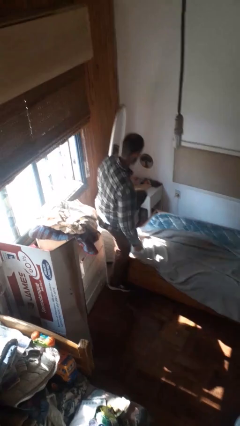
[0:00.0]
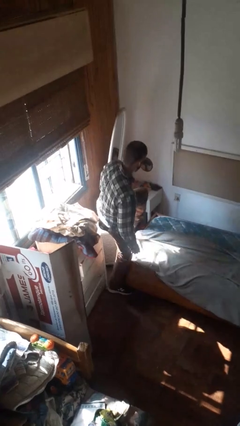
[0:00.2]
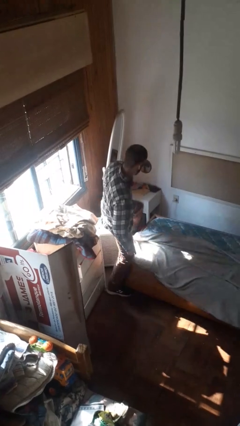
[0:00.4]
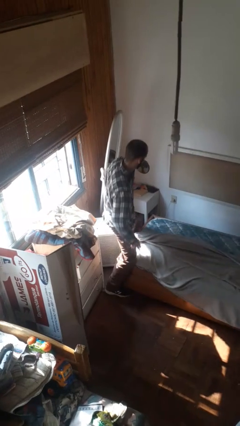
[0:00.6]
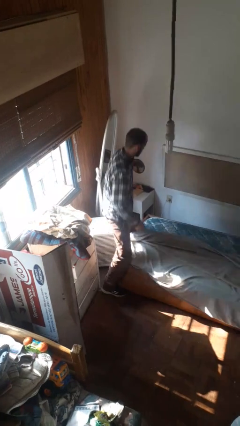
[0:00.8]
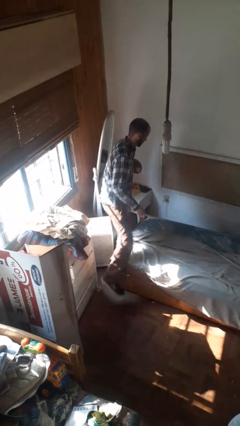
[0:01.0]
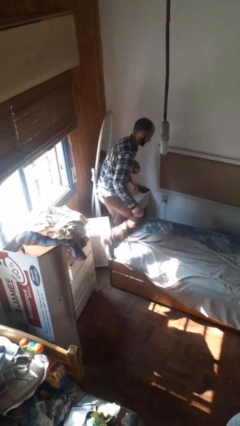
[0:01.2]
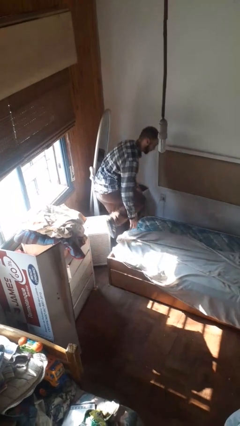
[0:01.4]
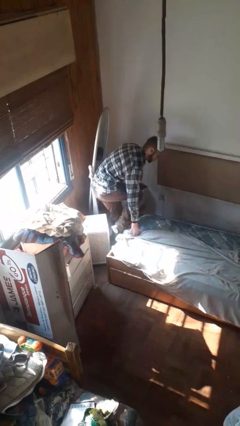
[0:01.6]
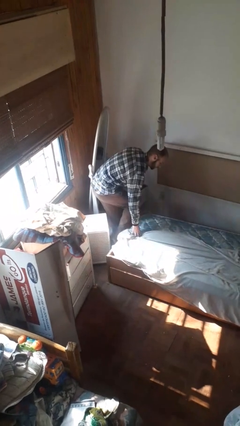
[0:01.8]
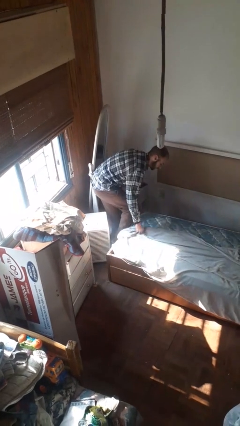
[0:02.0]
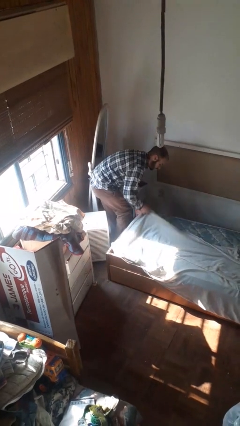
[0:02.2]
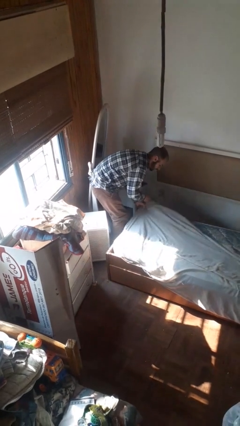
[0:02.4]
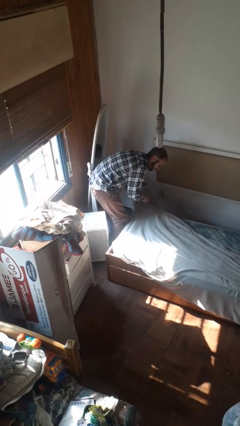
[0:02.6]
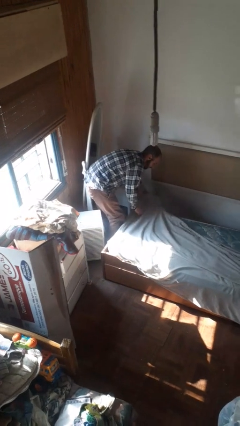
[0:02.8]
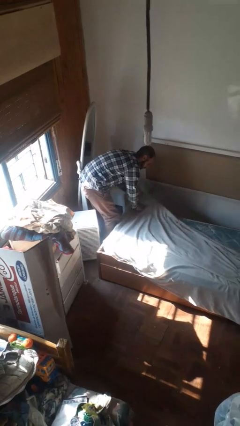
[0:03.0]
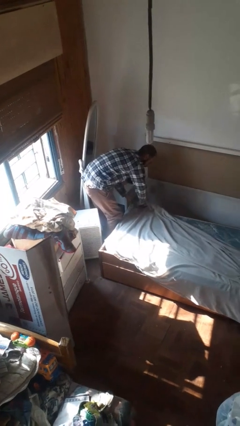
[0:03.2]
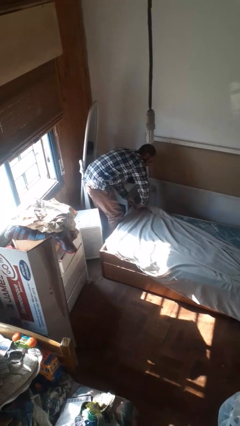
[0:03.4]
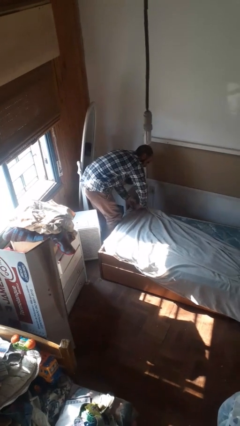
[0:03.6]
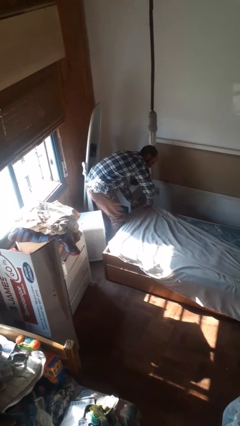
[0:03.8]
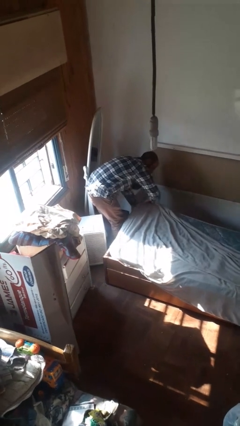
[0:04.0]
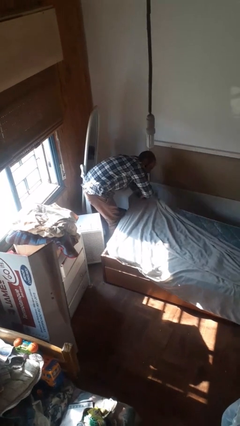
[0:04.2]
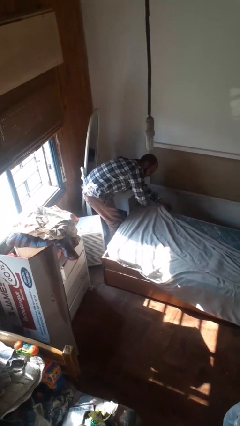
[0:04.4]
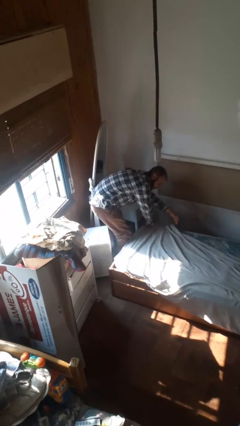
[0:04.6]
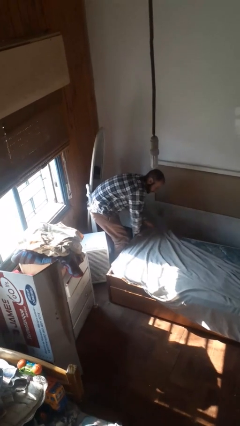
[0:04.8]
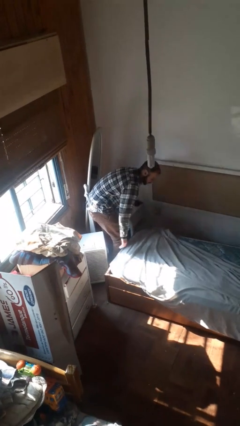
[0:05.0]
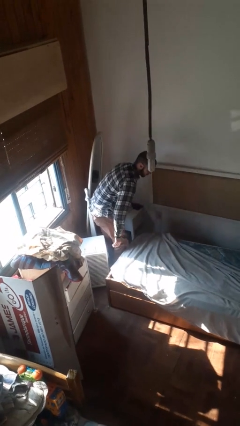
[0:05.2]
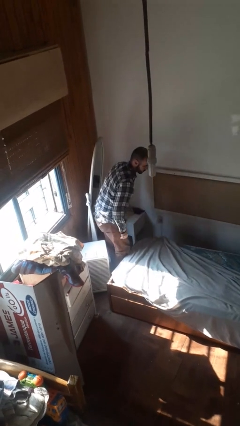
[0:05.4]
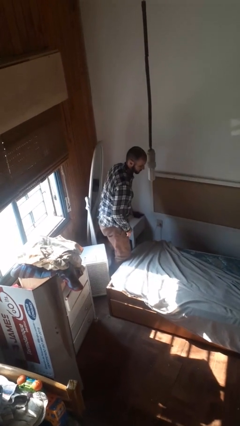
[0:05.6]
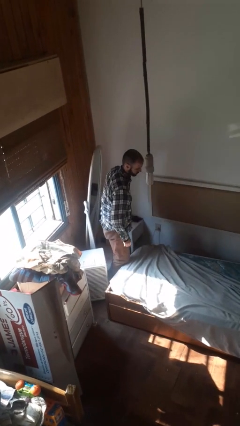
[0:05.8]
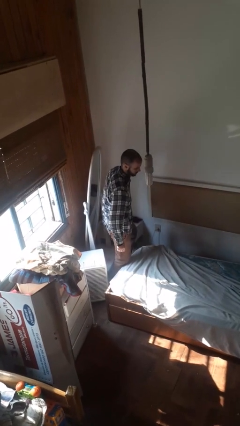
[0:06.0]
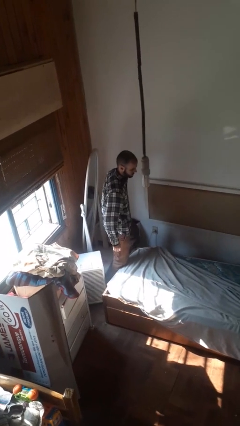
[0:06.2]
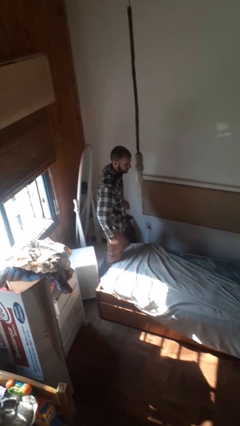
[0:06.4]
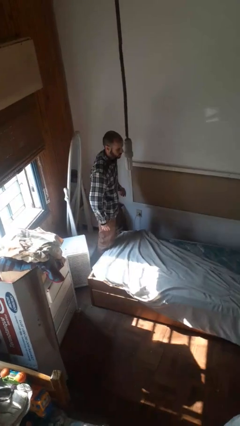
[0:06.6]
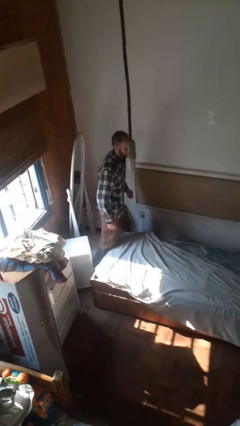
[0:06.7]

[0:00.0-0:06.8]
person makes bed

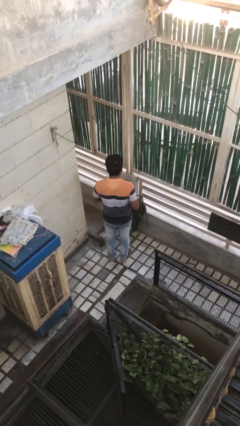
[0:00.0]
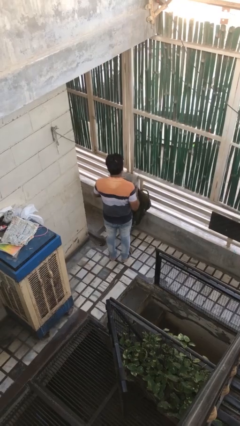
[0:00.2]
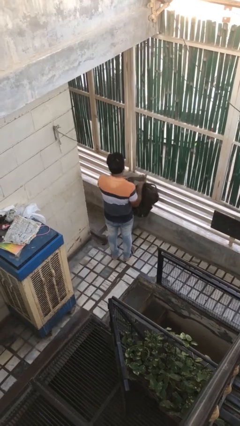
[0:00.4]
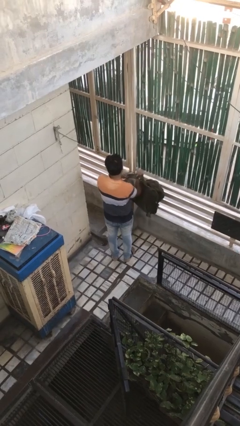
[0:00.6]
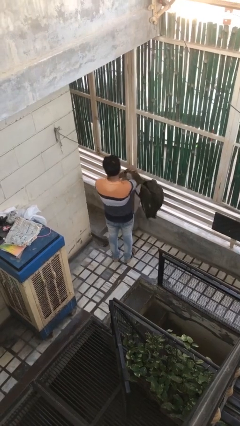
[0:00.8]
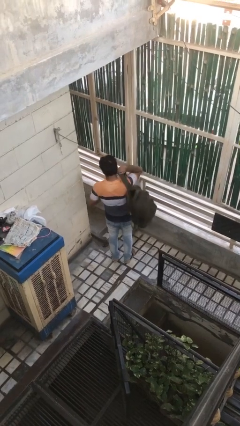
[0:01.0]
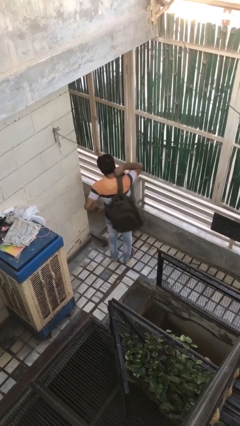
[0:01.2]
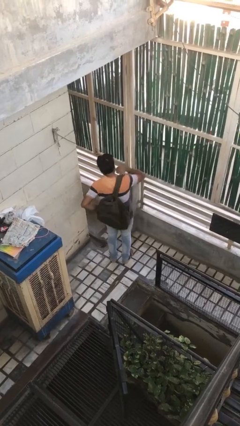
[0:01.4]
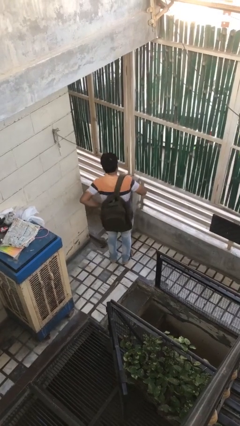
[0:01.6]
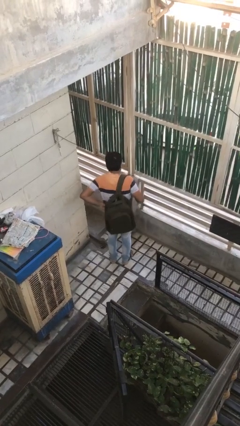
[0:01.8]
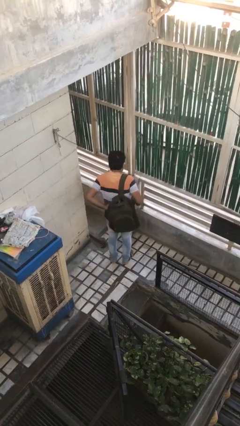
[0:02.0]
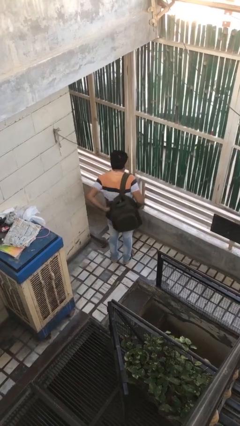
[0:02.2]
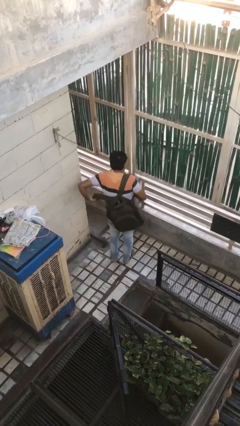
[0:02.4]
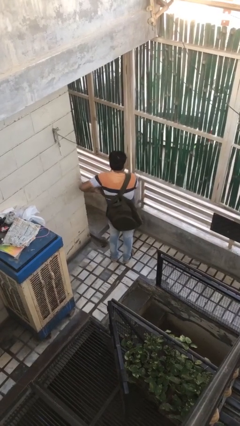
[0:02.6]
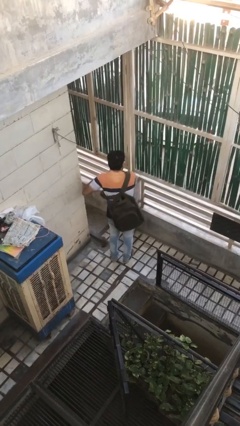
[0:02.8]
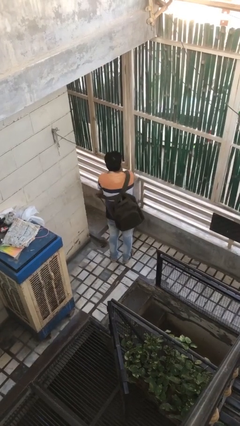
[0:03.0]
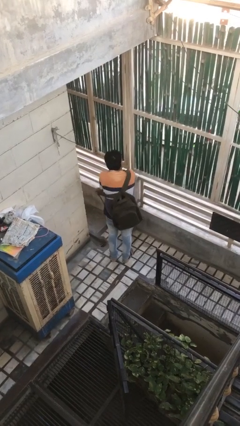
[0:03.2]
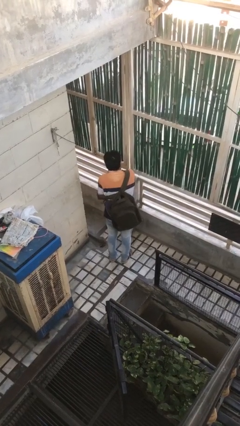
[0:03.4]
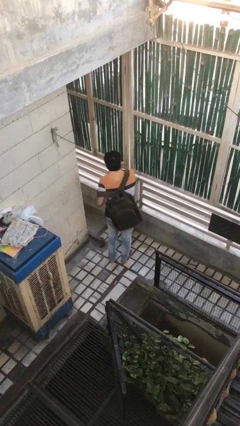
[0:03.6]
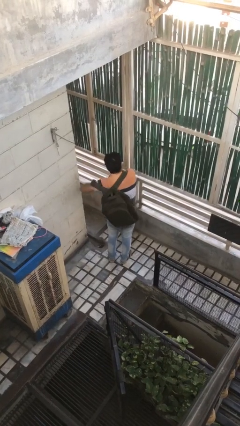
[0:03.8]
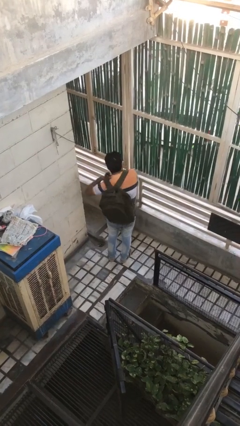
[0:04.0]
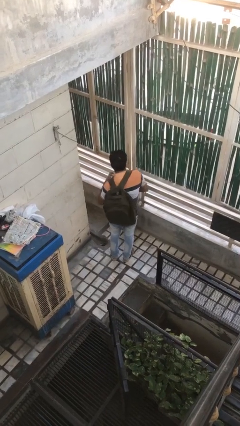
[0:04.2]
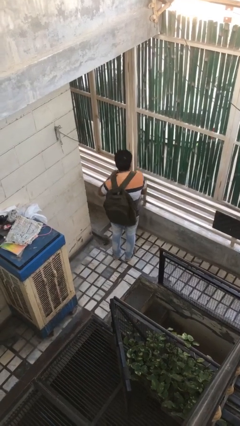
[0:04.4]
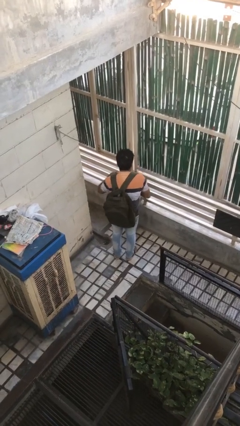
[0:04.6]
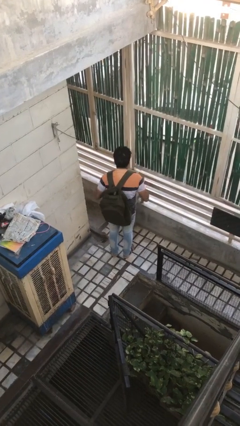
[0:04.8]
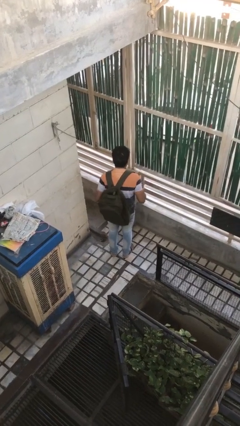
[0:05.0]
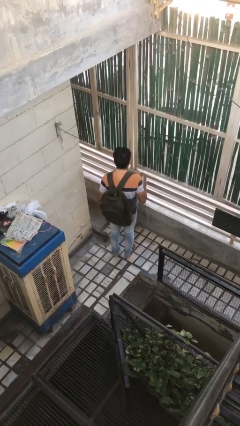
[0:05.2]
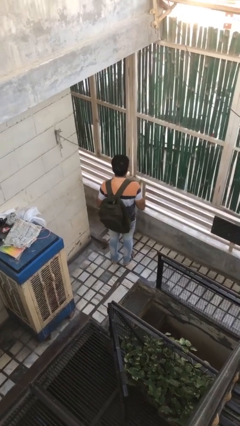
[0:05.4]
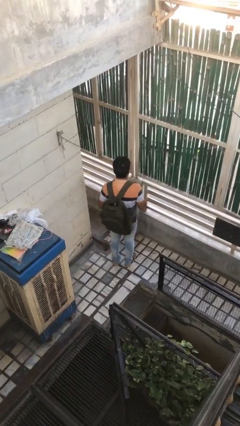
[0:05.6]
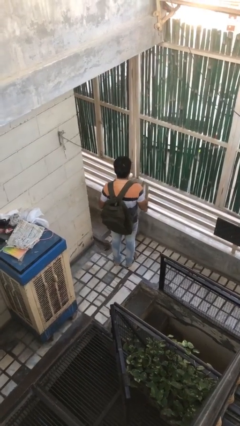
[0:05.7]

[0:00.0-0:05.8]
person puts on backpack

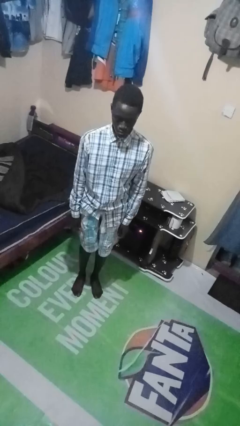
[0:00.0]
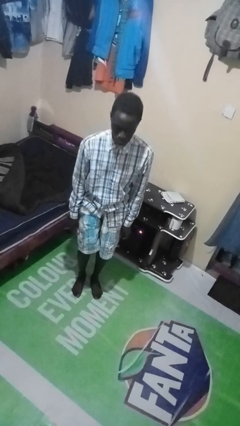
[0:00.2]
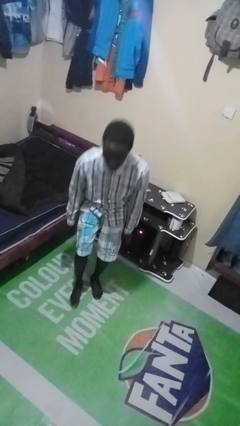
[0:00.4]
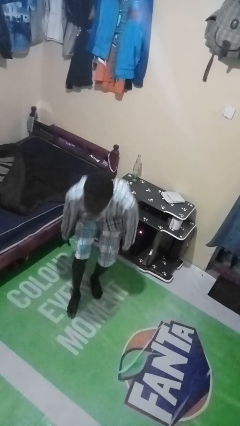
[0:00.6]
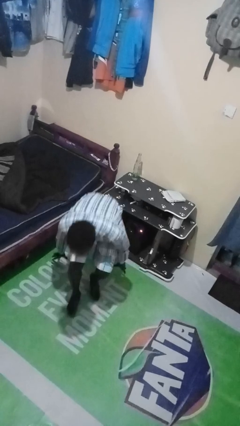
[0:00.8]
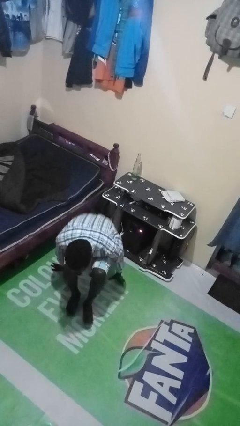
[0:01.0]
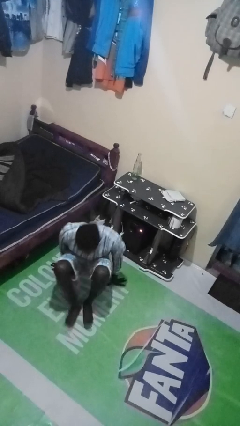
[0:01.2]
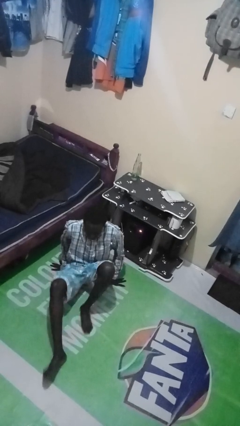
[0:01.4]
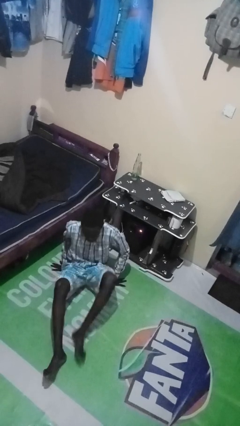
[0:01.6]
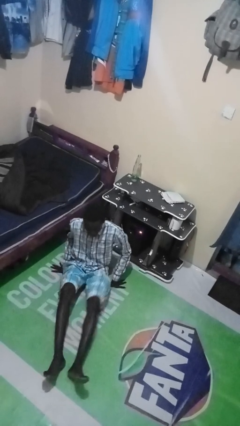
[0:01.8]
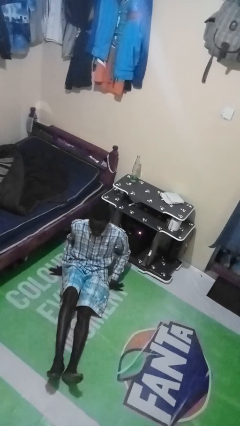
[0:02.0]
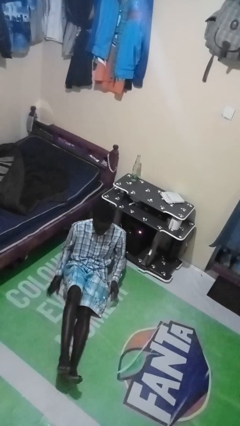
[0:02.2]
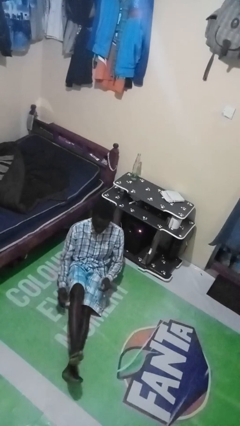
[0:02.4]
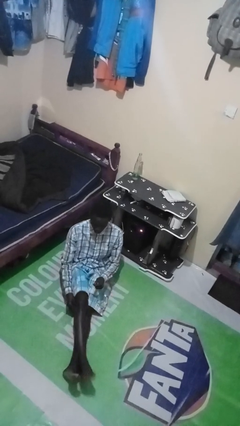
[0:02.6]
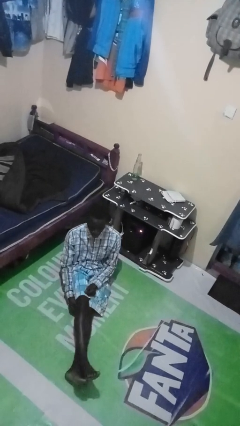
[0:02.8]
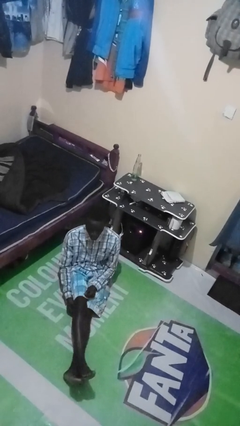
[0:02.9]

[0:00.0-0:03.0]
person sits crisscross

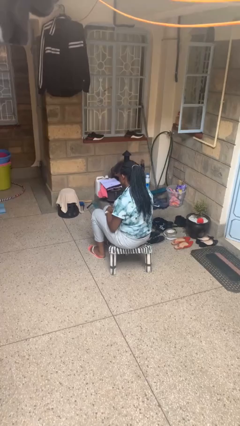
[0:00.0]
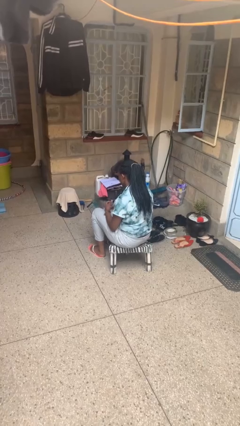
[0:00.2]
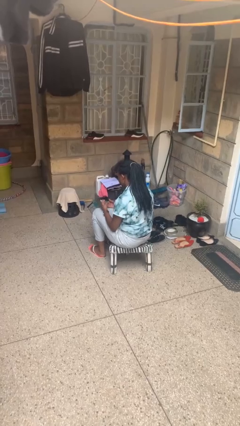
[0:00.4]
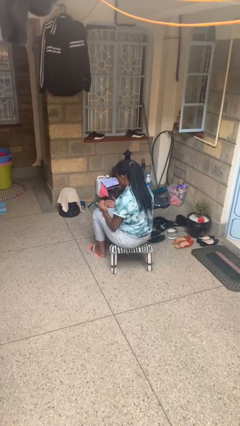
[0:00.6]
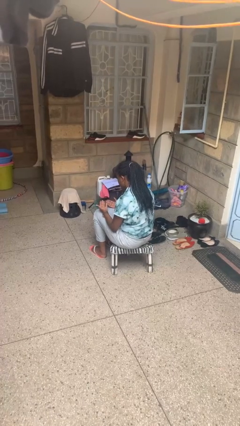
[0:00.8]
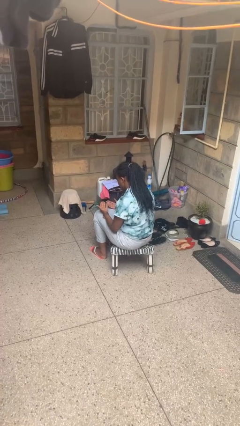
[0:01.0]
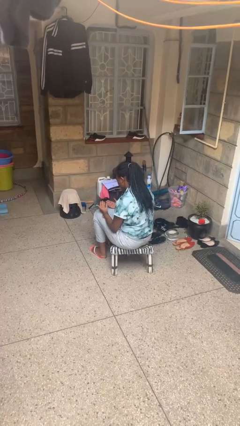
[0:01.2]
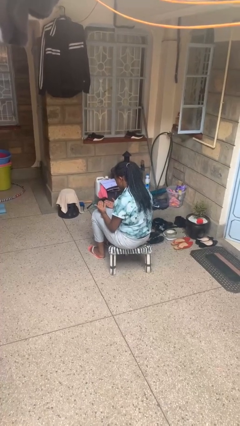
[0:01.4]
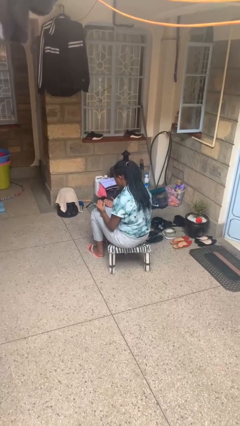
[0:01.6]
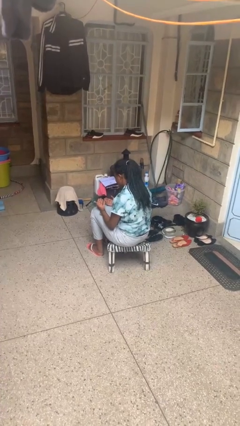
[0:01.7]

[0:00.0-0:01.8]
person looks at hands in lap

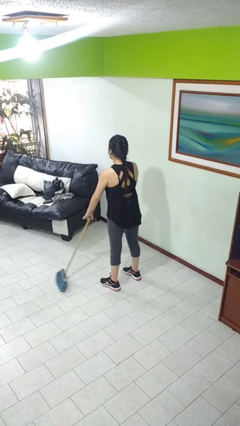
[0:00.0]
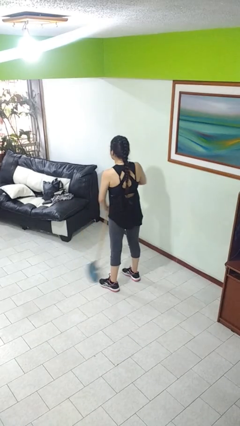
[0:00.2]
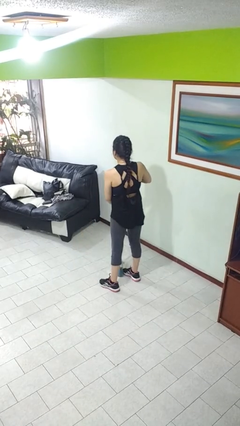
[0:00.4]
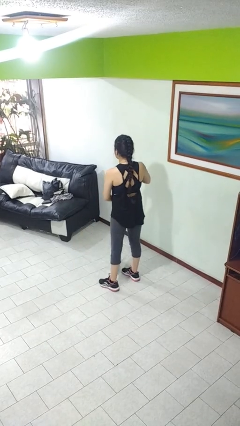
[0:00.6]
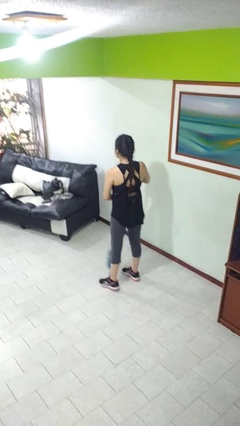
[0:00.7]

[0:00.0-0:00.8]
person sweeps floor
